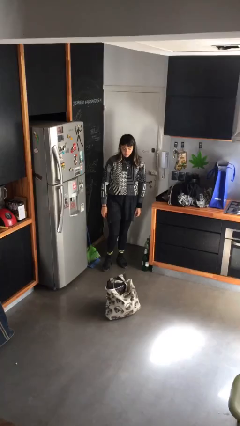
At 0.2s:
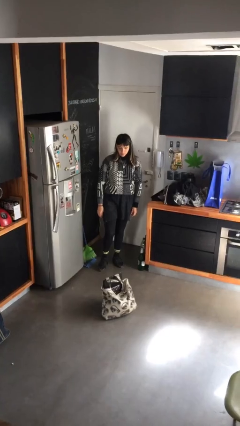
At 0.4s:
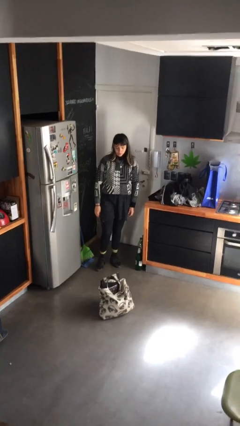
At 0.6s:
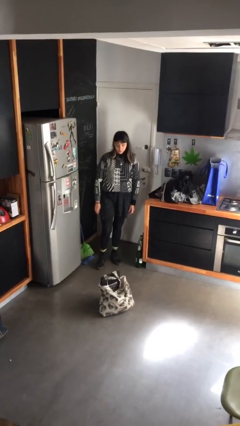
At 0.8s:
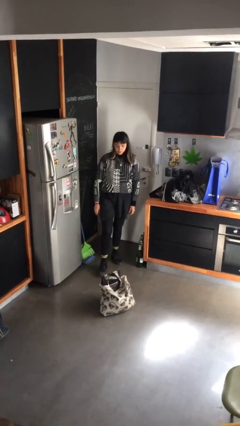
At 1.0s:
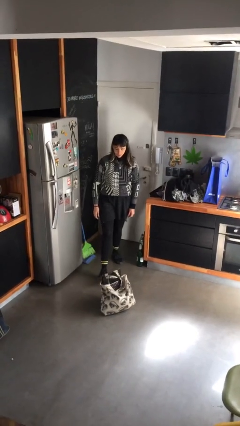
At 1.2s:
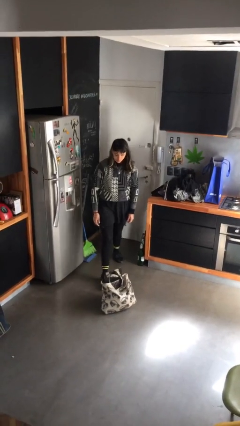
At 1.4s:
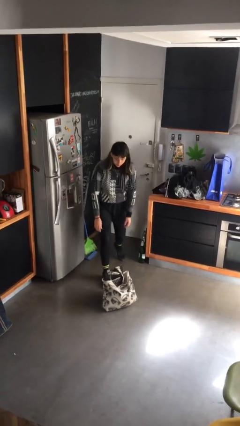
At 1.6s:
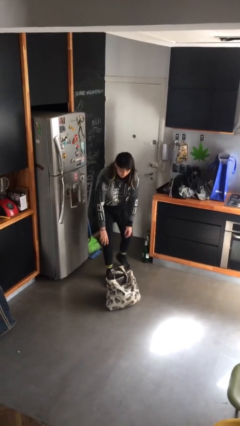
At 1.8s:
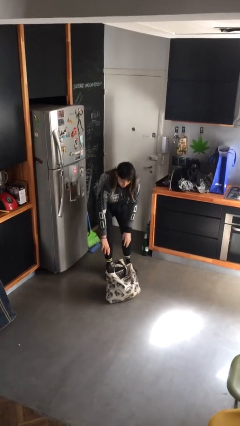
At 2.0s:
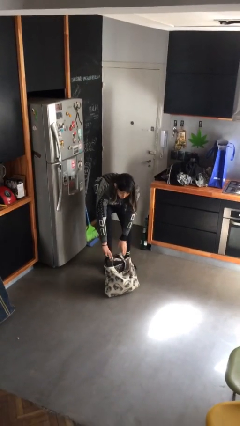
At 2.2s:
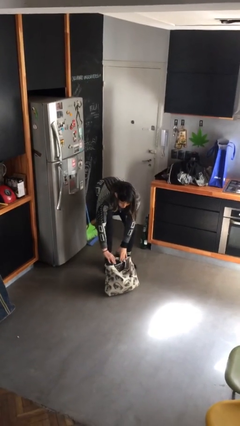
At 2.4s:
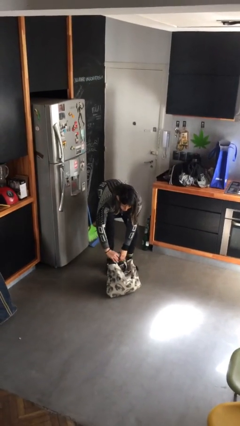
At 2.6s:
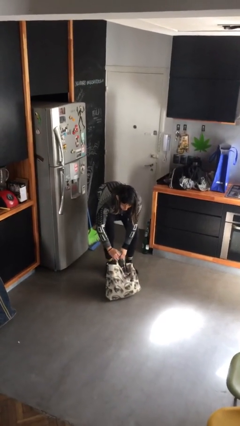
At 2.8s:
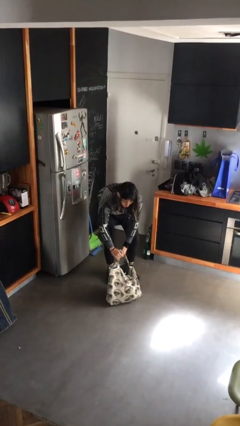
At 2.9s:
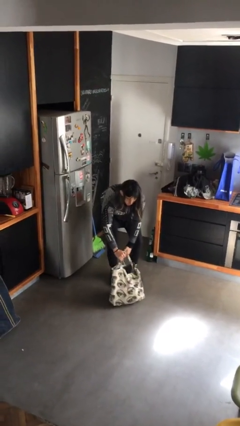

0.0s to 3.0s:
person picks up object from floor

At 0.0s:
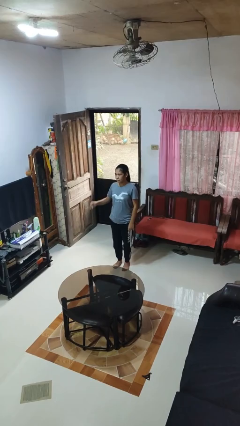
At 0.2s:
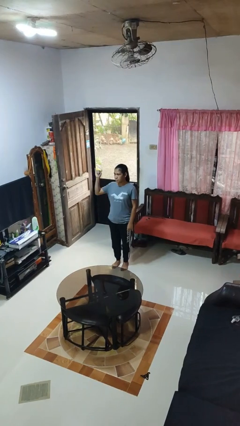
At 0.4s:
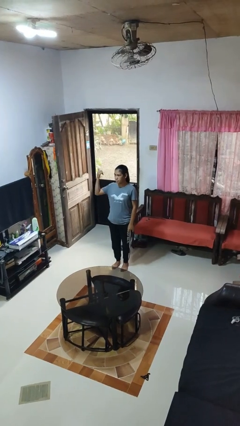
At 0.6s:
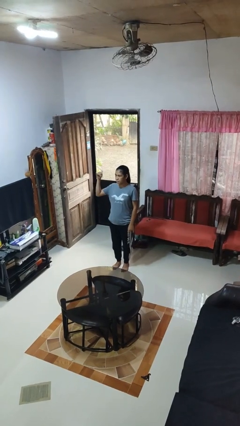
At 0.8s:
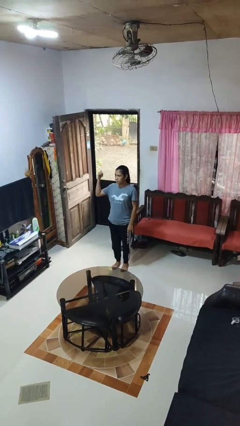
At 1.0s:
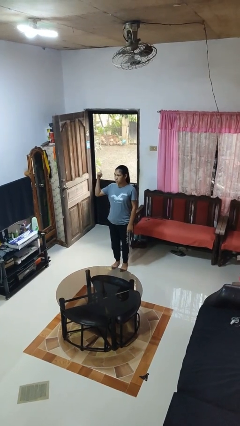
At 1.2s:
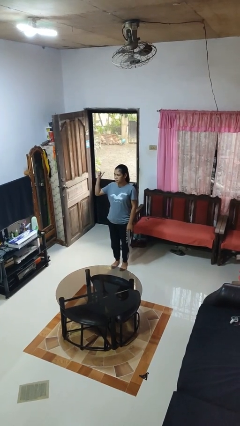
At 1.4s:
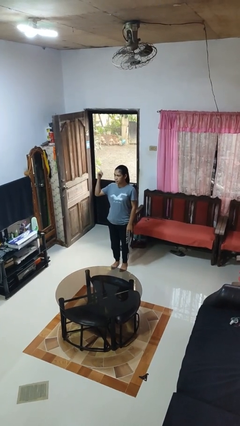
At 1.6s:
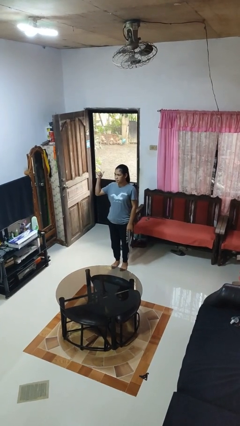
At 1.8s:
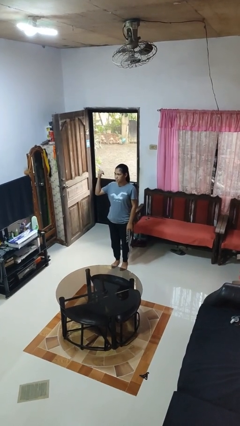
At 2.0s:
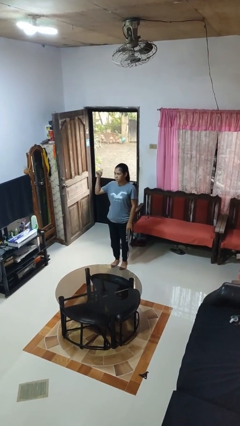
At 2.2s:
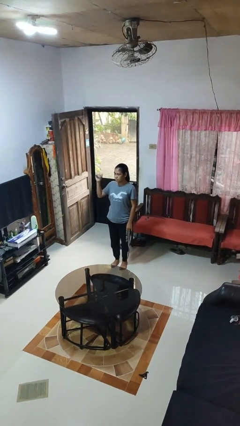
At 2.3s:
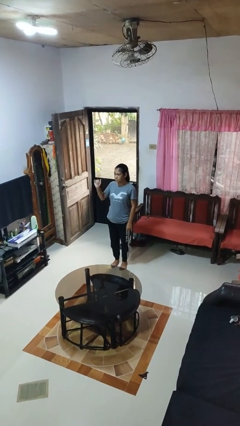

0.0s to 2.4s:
person gestures hang loose

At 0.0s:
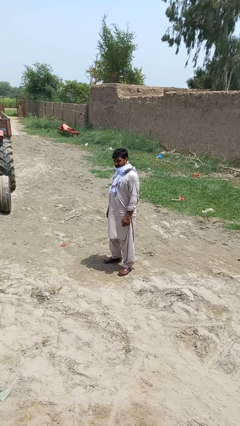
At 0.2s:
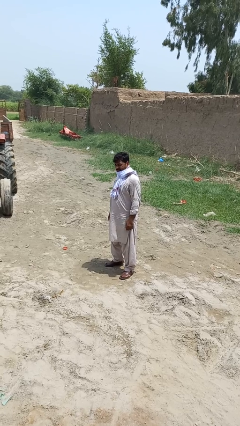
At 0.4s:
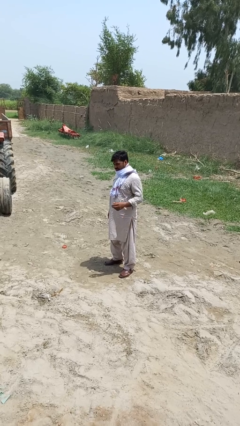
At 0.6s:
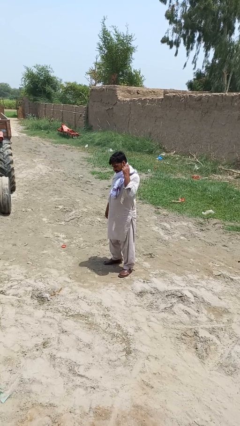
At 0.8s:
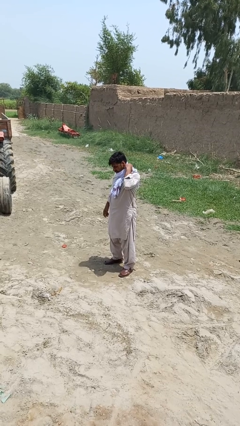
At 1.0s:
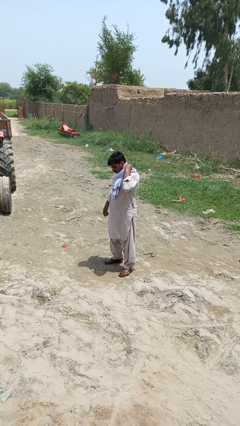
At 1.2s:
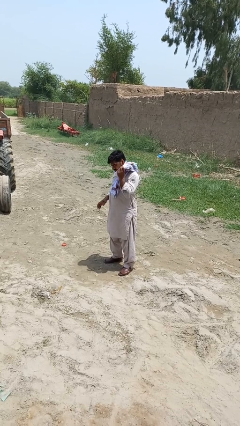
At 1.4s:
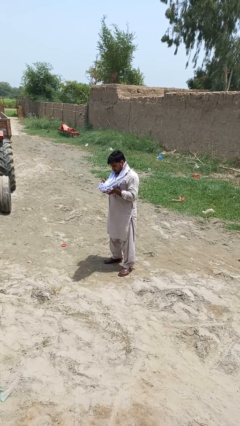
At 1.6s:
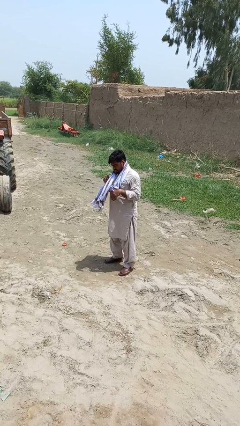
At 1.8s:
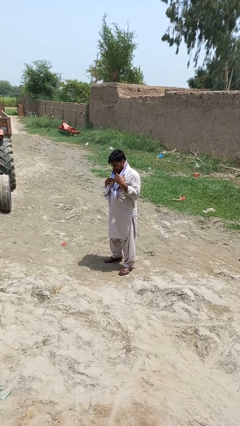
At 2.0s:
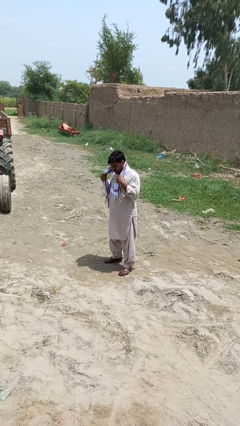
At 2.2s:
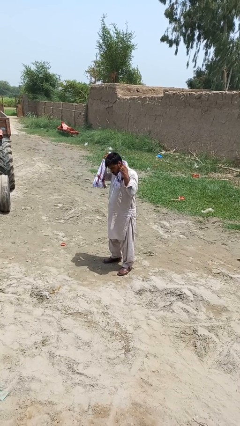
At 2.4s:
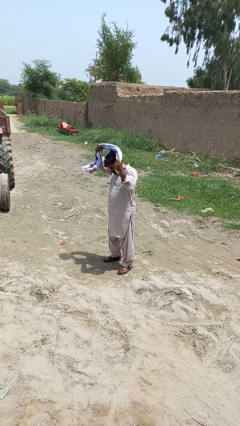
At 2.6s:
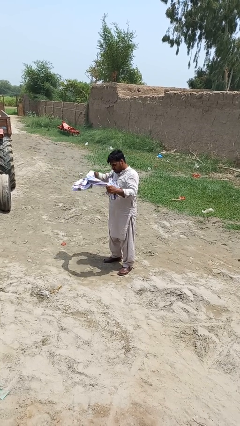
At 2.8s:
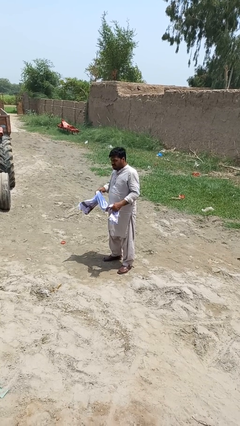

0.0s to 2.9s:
person takes off scarf

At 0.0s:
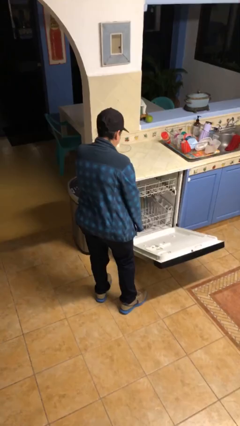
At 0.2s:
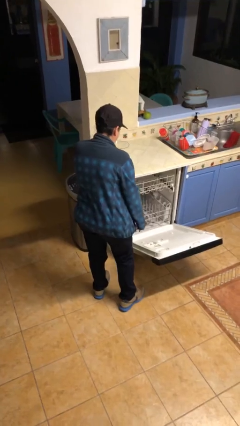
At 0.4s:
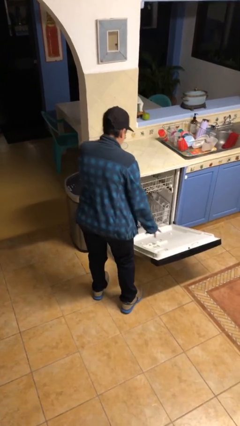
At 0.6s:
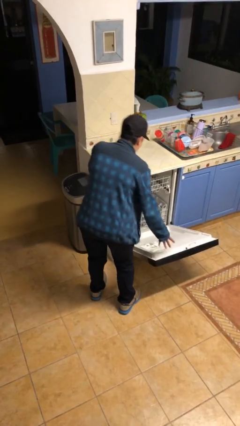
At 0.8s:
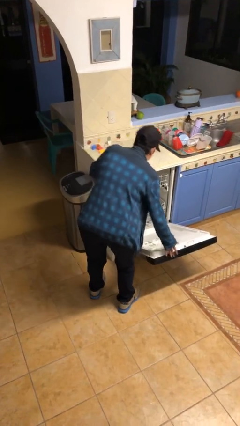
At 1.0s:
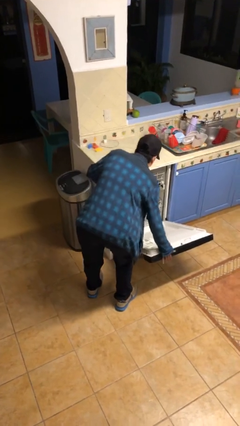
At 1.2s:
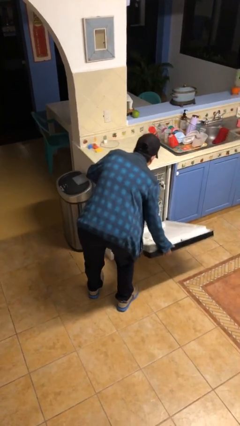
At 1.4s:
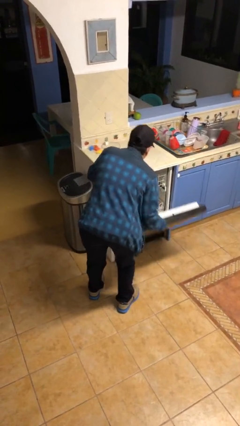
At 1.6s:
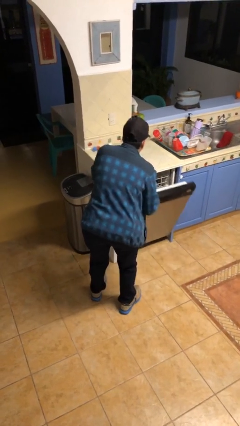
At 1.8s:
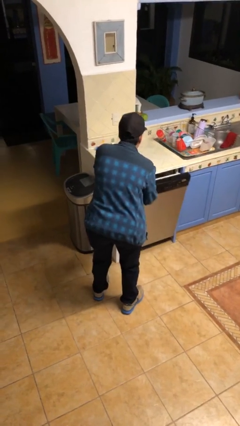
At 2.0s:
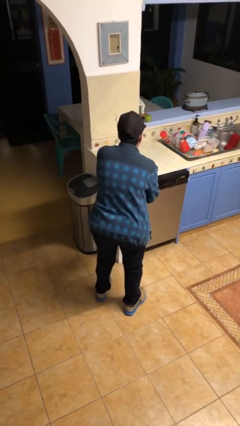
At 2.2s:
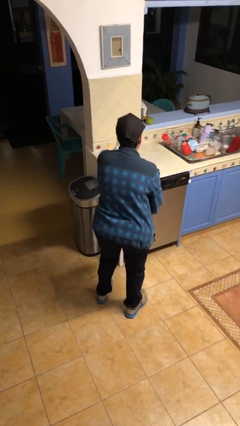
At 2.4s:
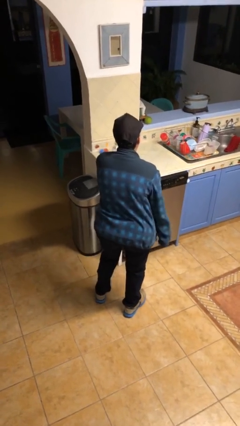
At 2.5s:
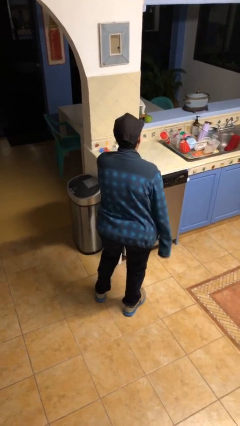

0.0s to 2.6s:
person closes dishwasher

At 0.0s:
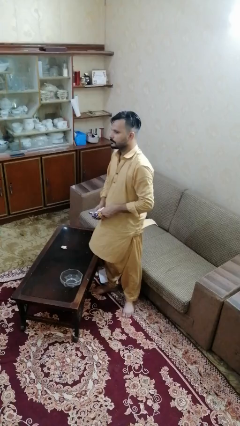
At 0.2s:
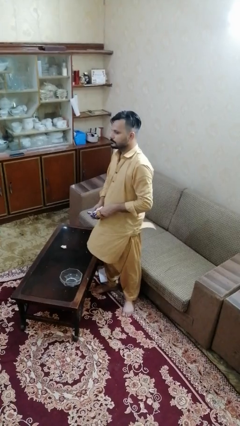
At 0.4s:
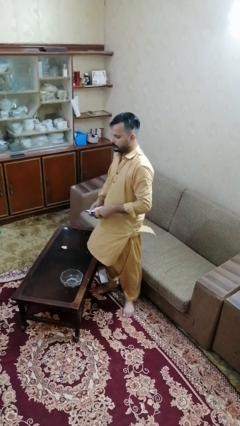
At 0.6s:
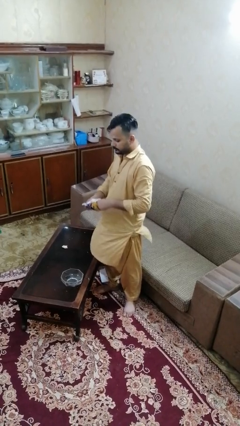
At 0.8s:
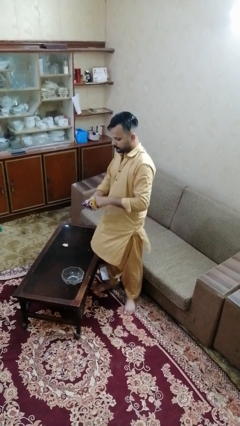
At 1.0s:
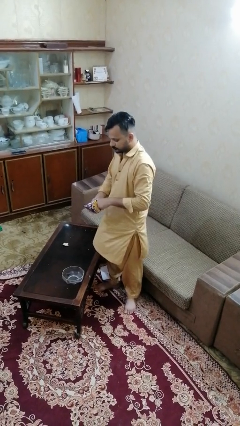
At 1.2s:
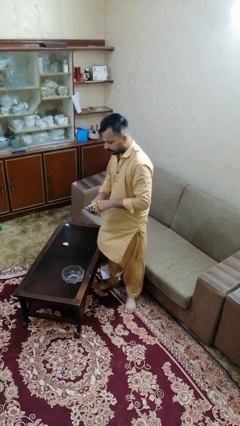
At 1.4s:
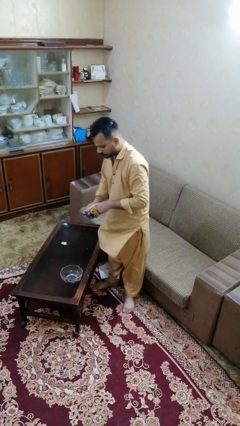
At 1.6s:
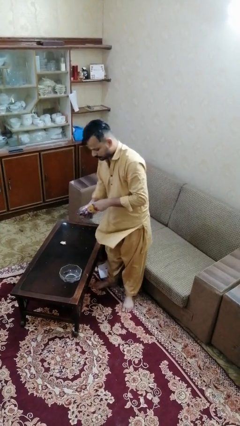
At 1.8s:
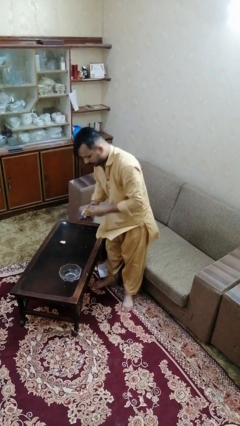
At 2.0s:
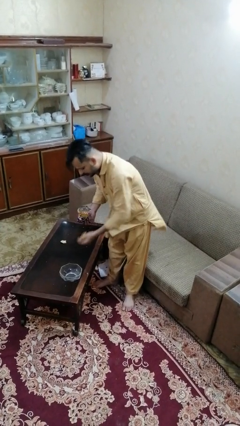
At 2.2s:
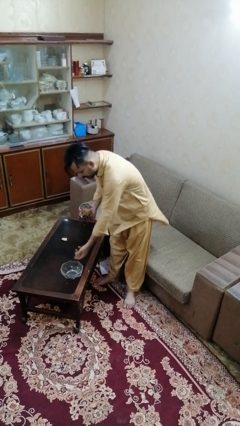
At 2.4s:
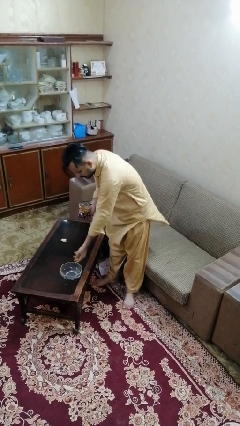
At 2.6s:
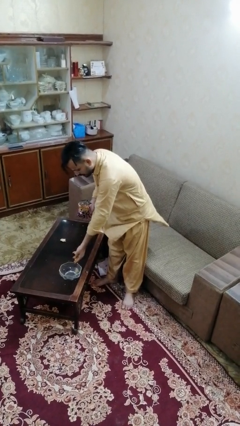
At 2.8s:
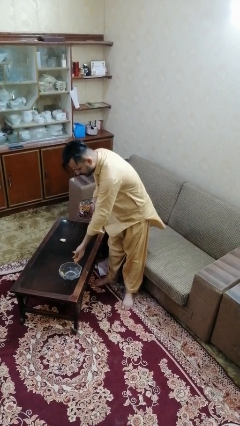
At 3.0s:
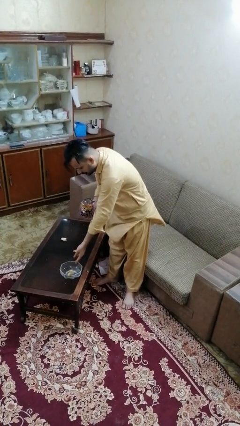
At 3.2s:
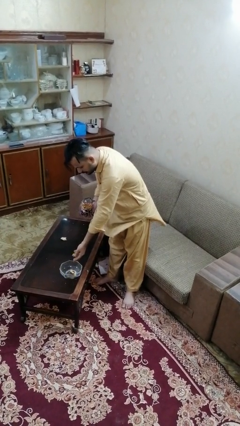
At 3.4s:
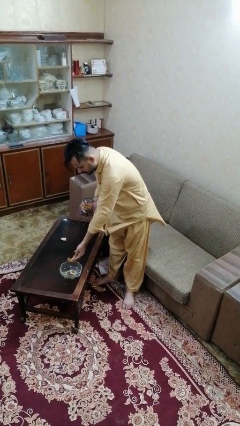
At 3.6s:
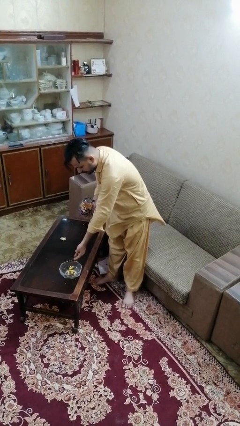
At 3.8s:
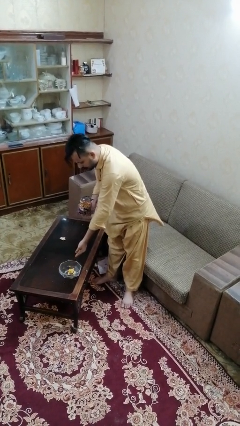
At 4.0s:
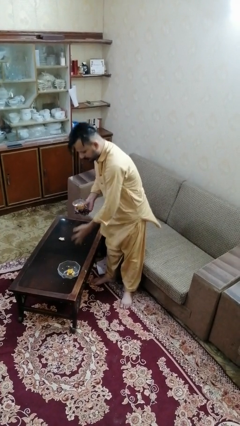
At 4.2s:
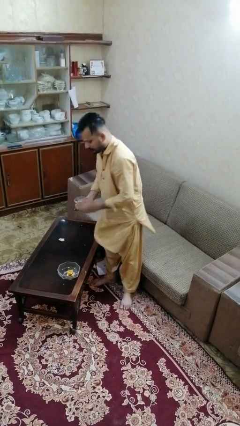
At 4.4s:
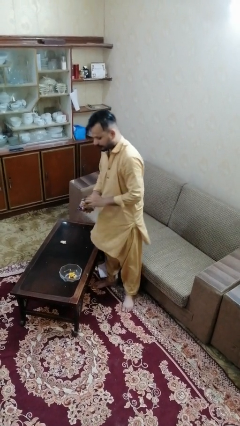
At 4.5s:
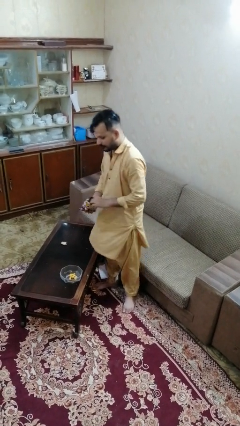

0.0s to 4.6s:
person pours into bowl

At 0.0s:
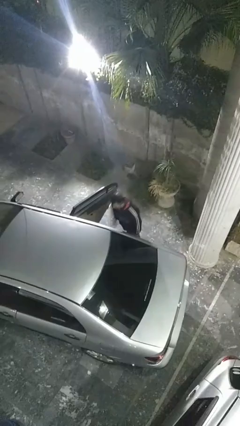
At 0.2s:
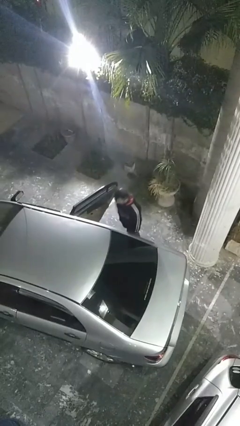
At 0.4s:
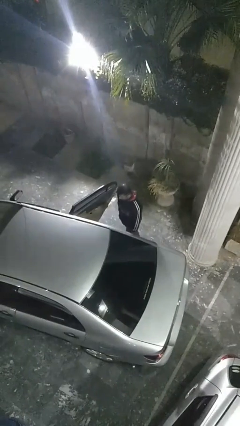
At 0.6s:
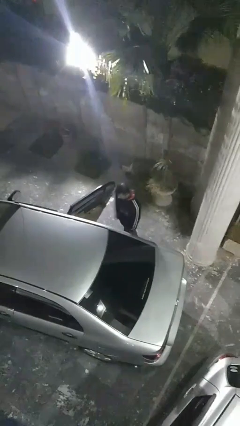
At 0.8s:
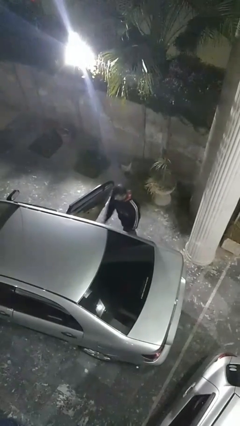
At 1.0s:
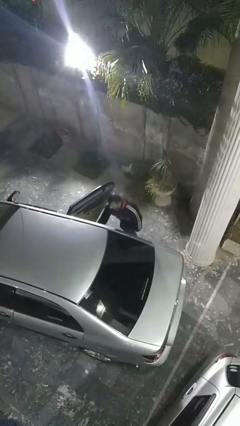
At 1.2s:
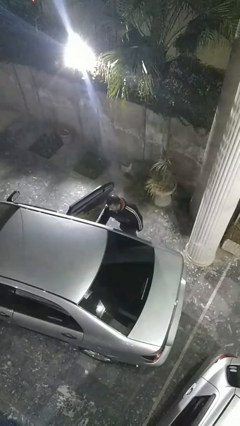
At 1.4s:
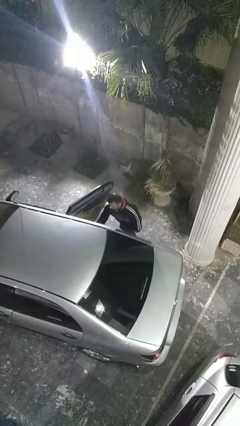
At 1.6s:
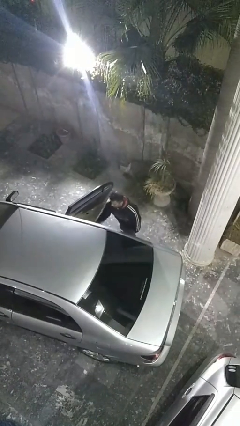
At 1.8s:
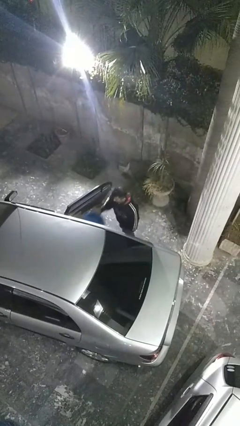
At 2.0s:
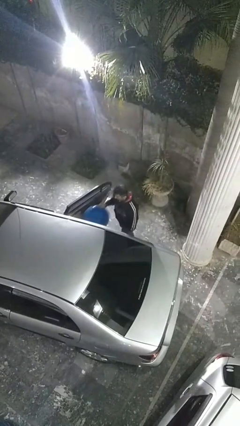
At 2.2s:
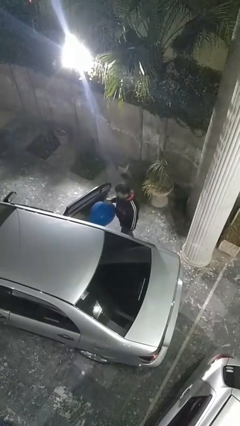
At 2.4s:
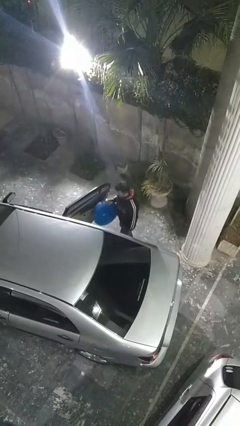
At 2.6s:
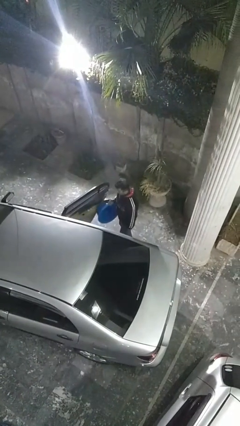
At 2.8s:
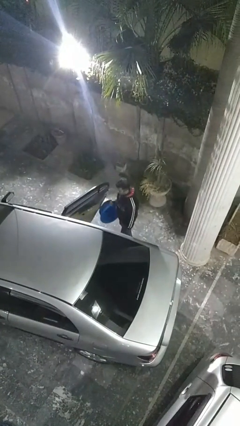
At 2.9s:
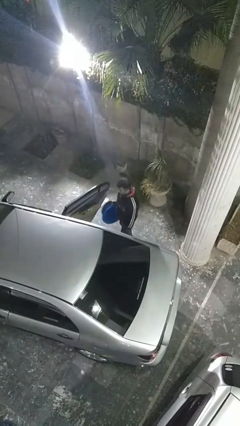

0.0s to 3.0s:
person unloads car
